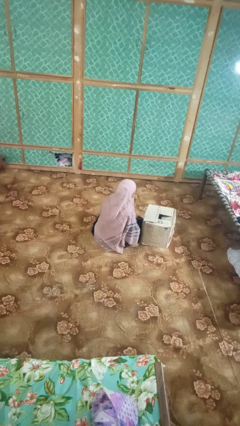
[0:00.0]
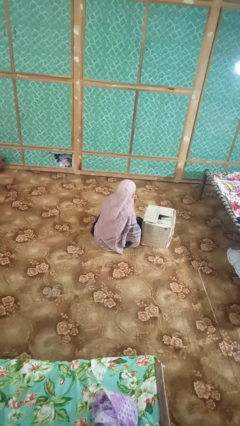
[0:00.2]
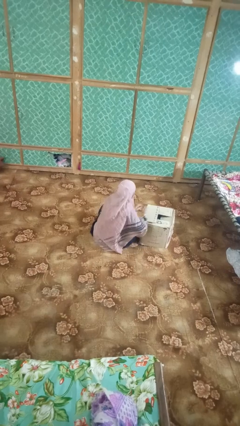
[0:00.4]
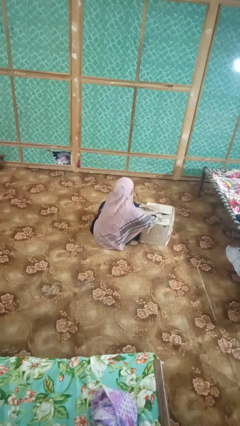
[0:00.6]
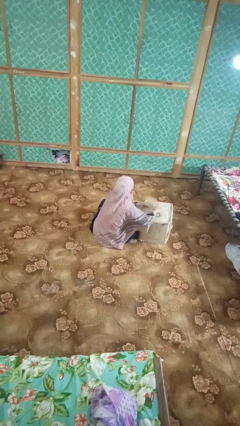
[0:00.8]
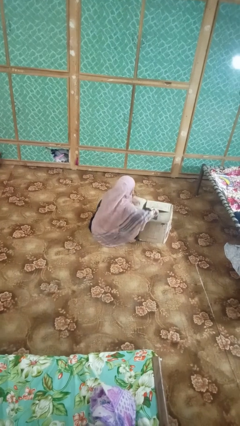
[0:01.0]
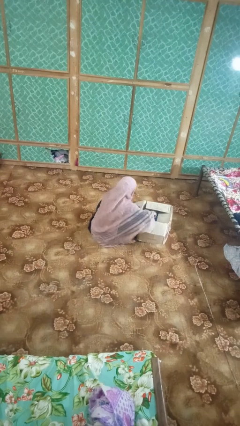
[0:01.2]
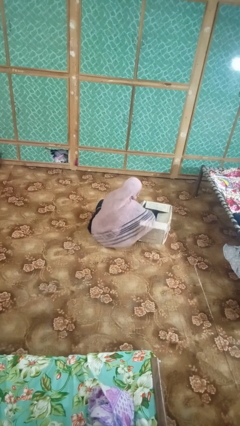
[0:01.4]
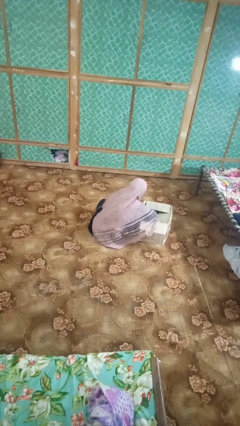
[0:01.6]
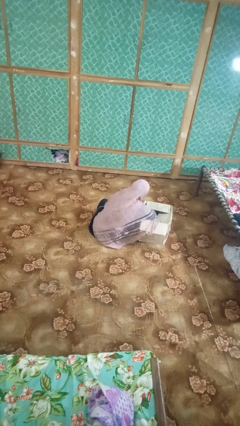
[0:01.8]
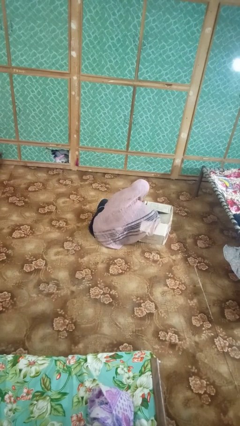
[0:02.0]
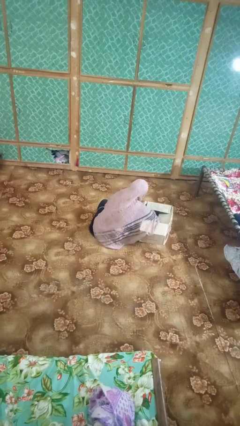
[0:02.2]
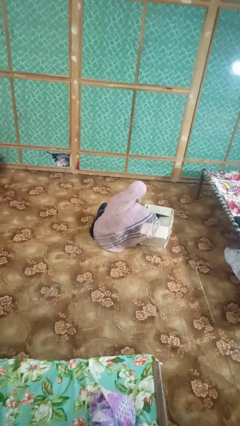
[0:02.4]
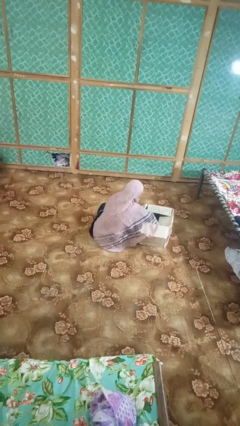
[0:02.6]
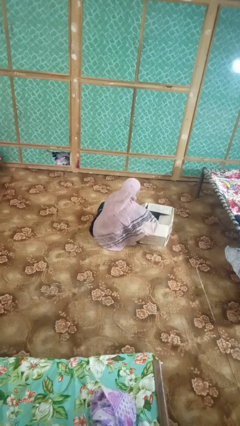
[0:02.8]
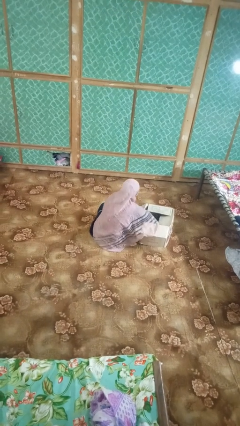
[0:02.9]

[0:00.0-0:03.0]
person searches in box

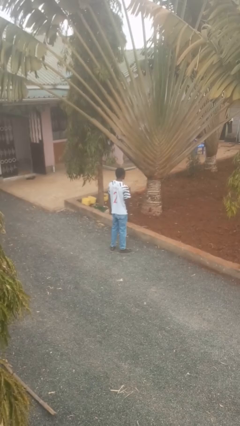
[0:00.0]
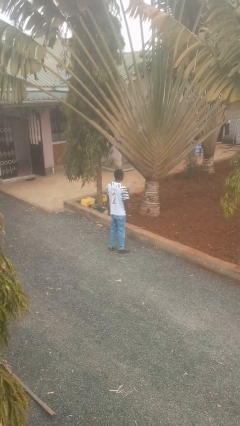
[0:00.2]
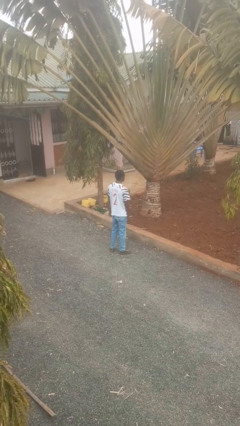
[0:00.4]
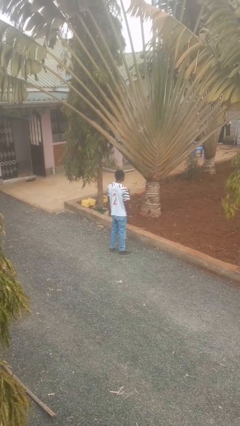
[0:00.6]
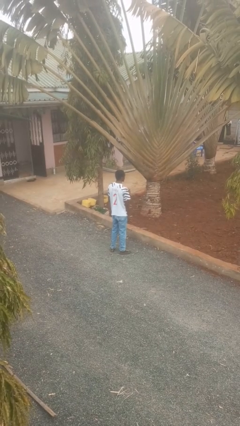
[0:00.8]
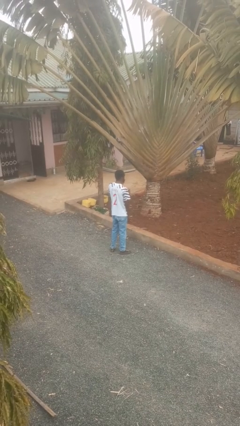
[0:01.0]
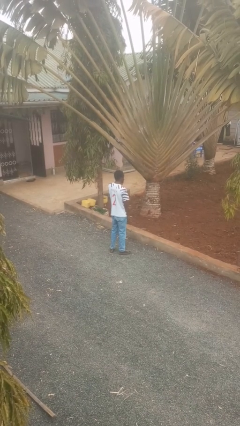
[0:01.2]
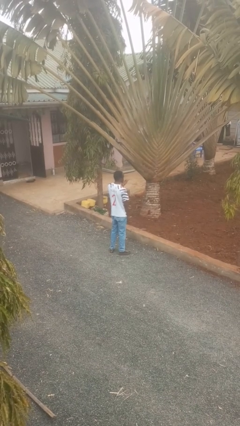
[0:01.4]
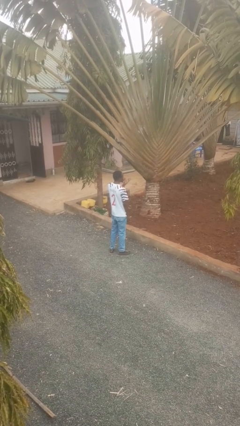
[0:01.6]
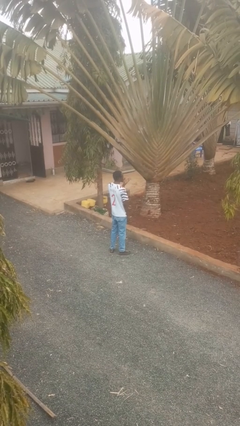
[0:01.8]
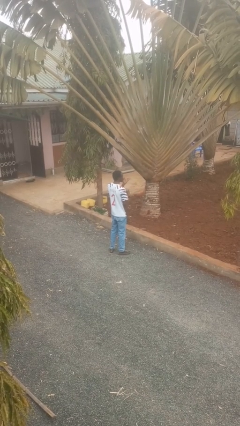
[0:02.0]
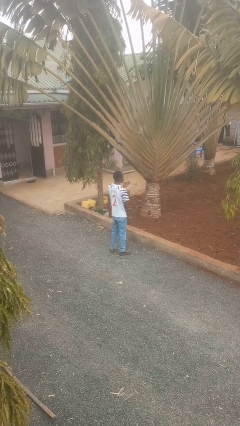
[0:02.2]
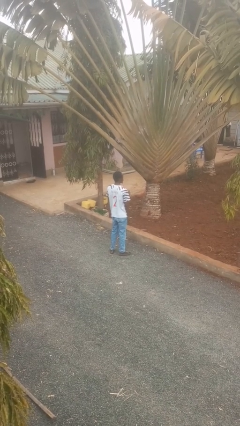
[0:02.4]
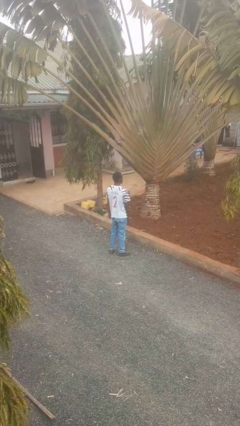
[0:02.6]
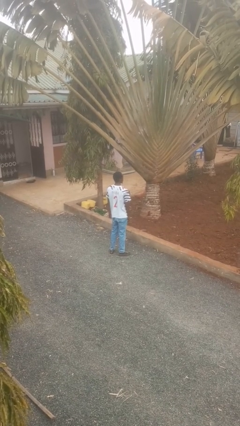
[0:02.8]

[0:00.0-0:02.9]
person gestures blow kiss

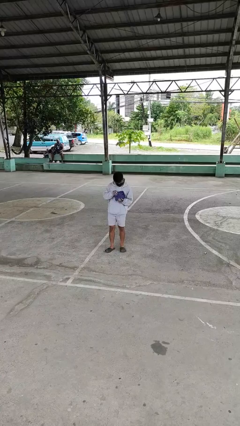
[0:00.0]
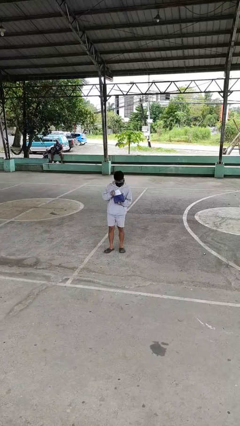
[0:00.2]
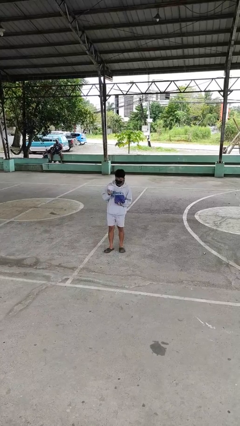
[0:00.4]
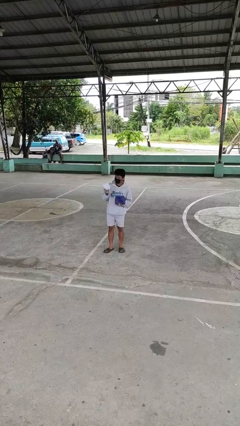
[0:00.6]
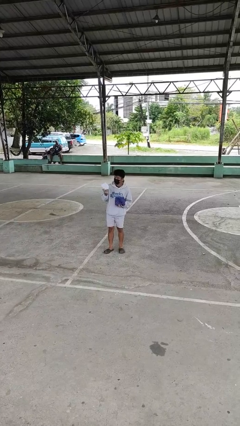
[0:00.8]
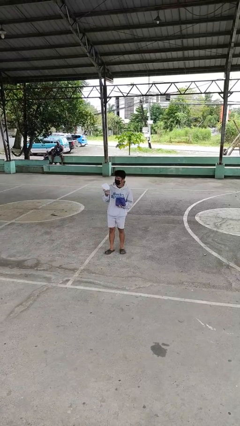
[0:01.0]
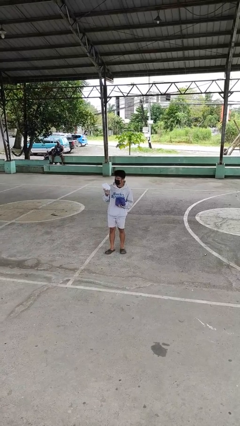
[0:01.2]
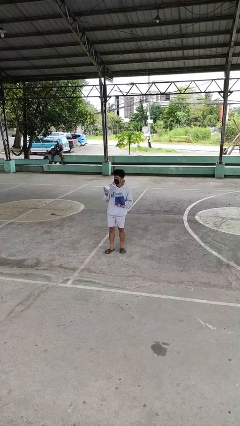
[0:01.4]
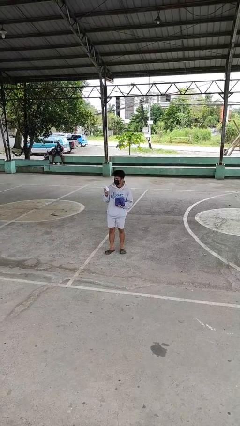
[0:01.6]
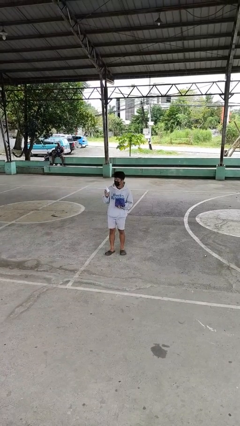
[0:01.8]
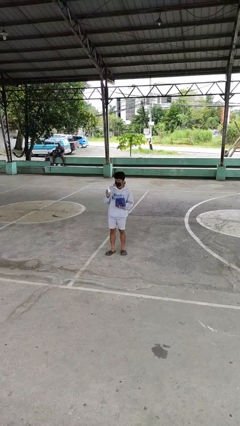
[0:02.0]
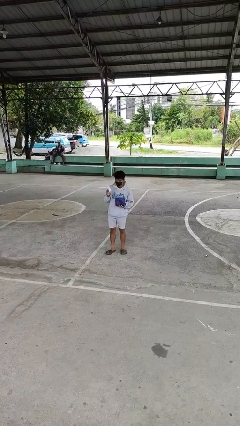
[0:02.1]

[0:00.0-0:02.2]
person takes object from purse

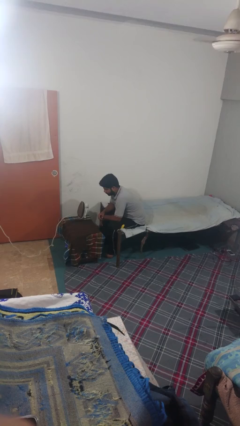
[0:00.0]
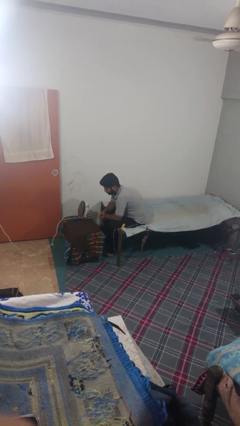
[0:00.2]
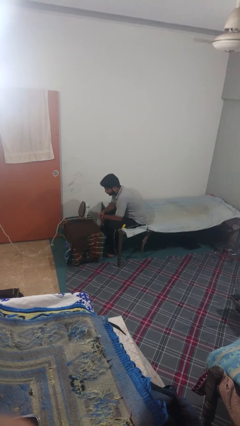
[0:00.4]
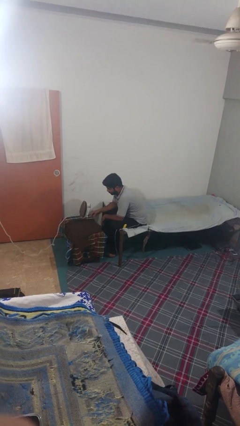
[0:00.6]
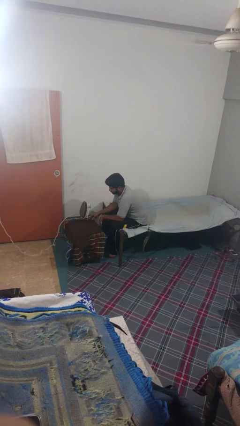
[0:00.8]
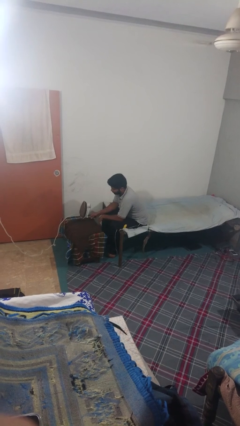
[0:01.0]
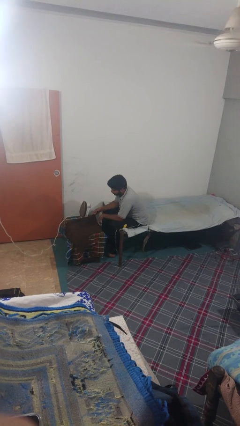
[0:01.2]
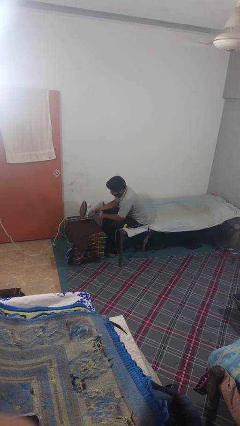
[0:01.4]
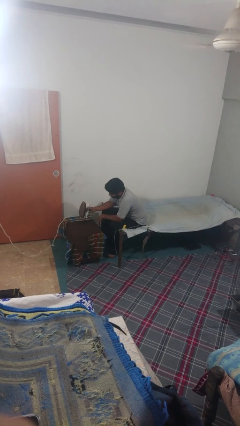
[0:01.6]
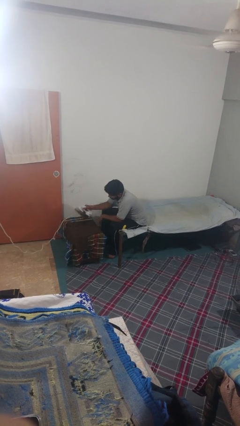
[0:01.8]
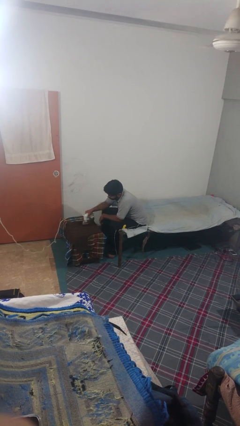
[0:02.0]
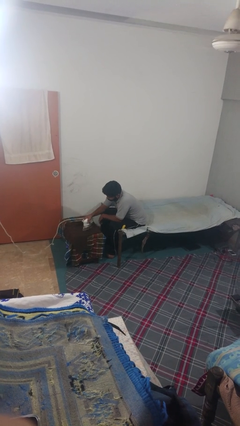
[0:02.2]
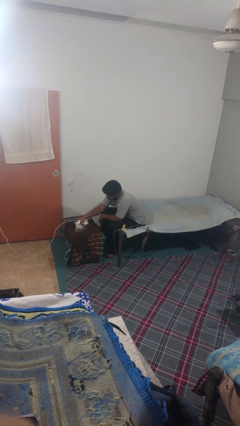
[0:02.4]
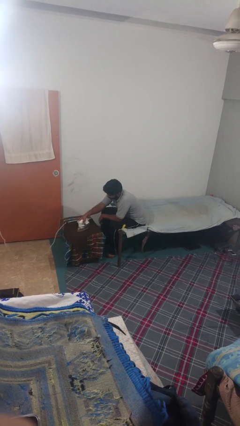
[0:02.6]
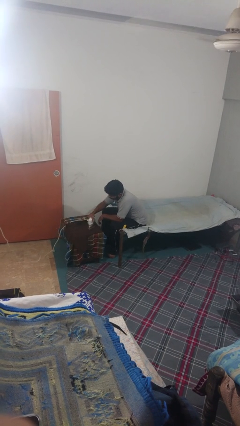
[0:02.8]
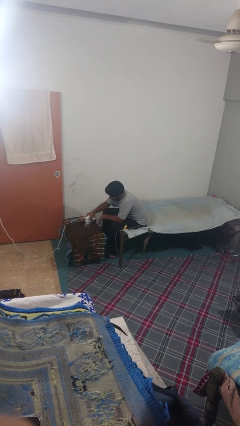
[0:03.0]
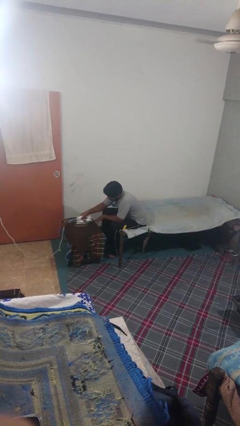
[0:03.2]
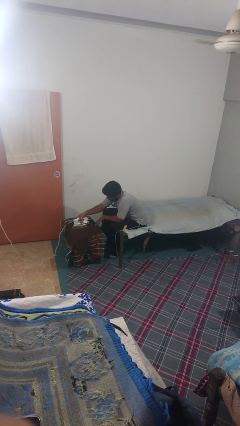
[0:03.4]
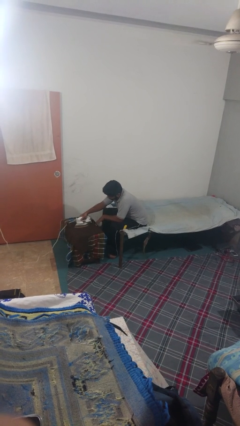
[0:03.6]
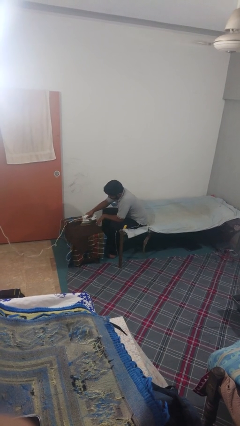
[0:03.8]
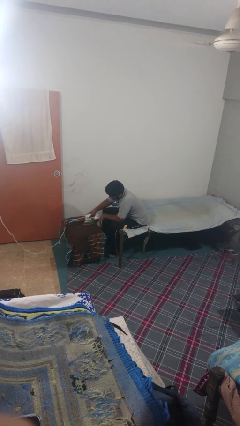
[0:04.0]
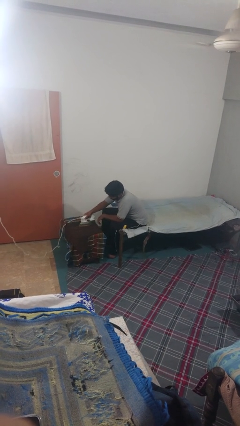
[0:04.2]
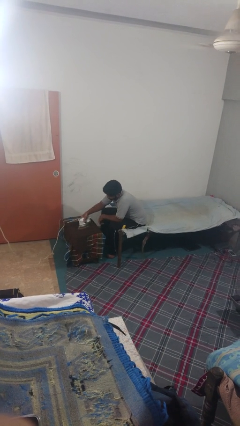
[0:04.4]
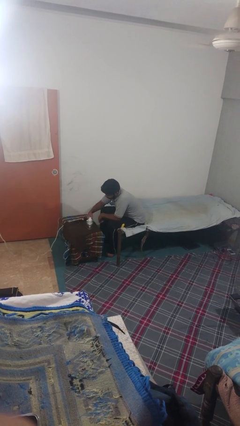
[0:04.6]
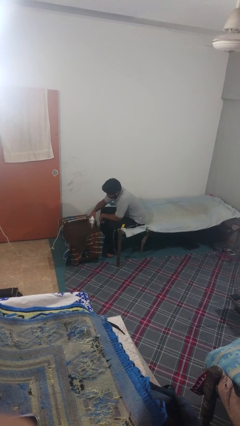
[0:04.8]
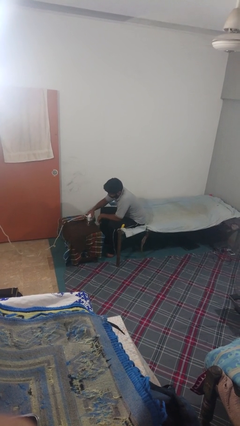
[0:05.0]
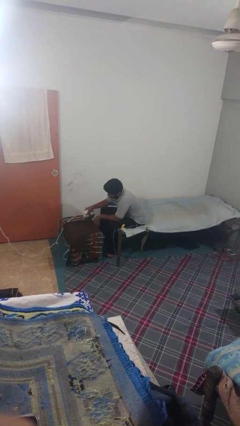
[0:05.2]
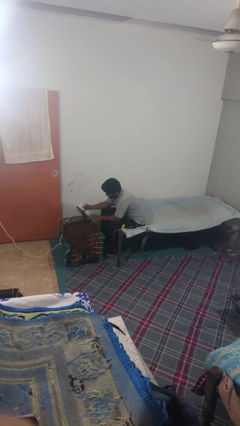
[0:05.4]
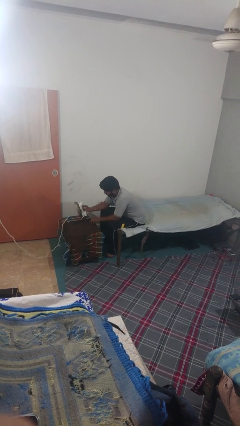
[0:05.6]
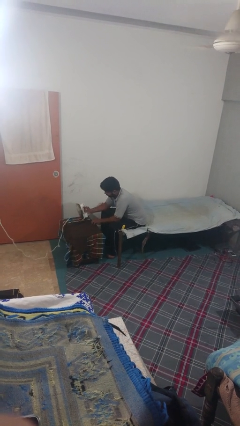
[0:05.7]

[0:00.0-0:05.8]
person irons clothes

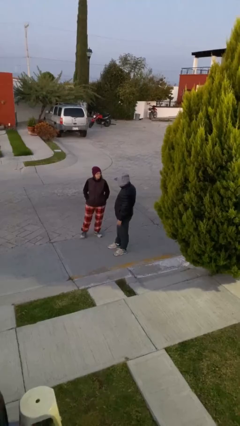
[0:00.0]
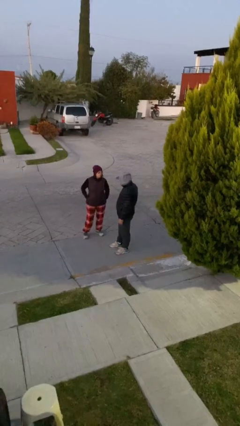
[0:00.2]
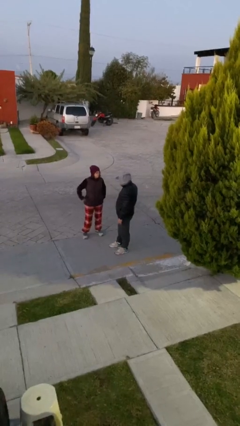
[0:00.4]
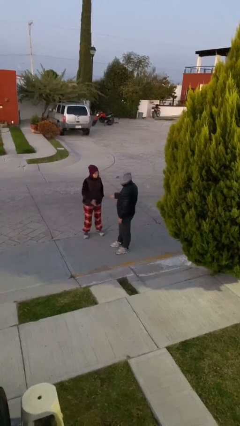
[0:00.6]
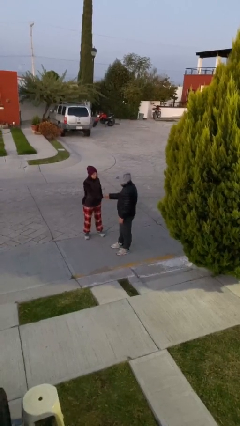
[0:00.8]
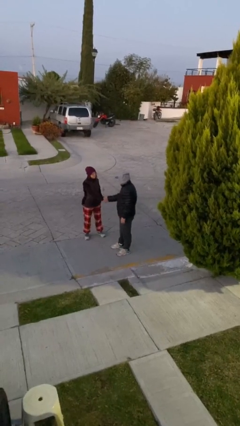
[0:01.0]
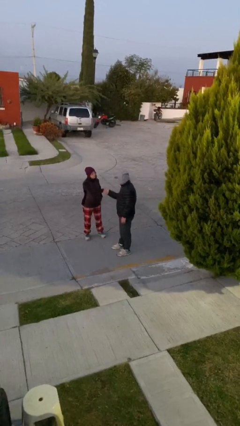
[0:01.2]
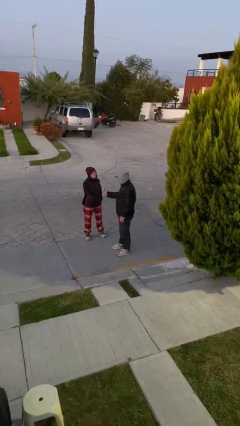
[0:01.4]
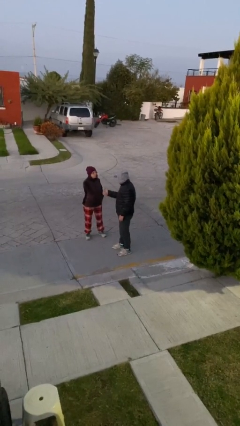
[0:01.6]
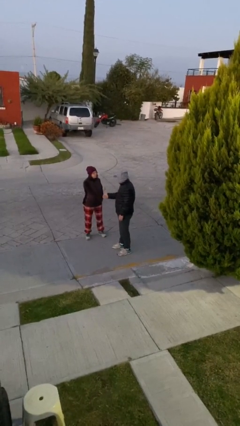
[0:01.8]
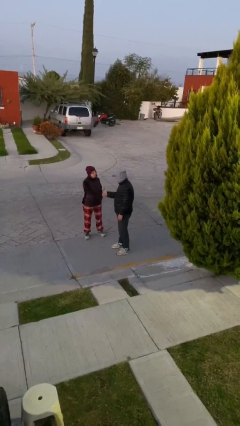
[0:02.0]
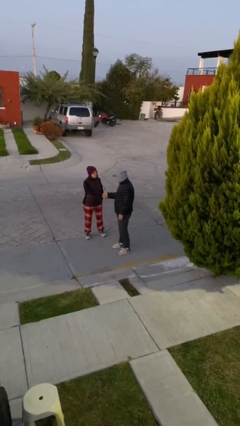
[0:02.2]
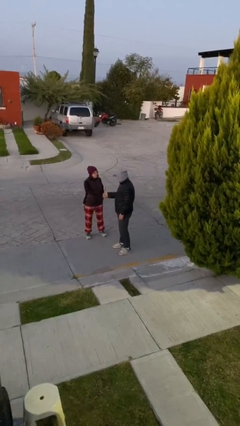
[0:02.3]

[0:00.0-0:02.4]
person shakes hand

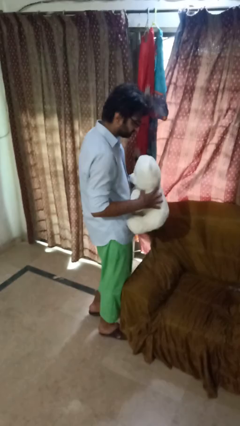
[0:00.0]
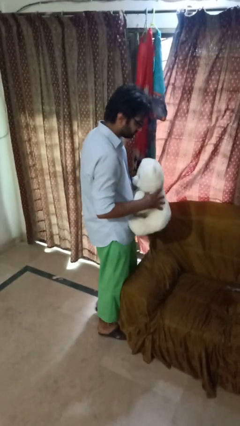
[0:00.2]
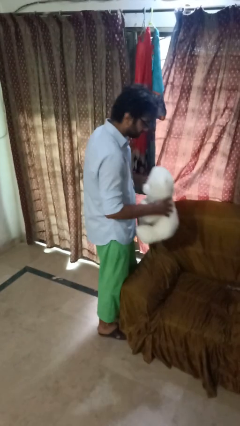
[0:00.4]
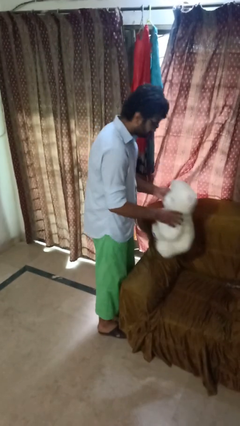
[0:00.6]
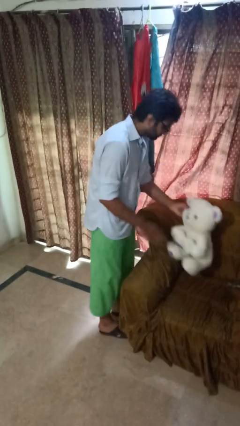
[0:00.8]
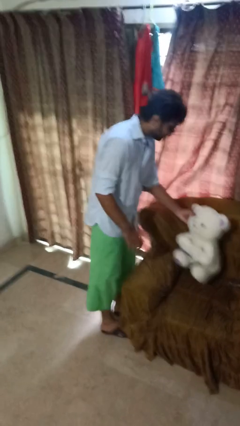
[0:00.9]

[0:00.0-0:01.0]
person puts down object on couch

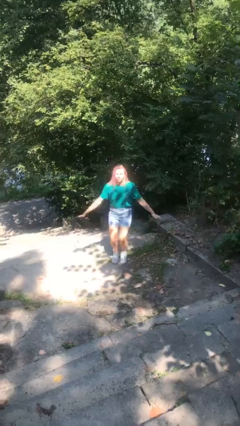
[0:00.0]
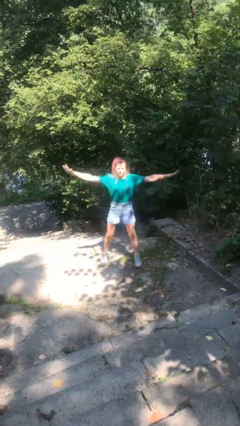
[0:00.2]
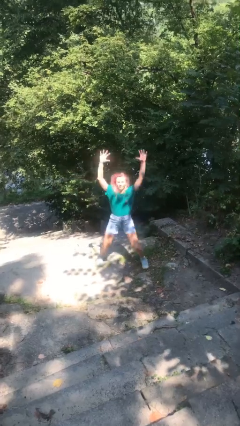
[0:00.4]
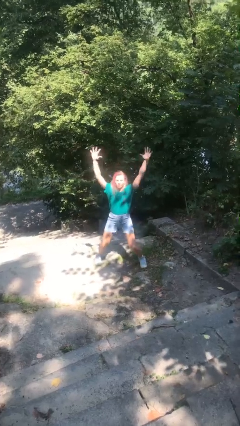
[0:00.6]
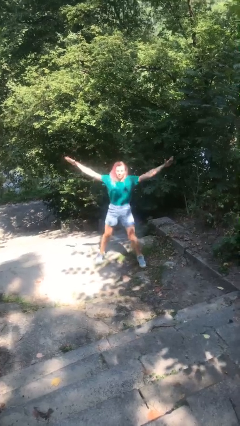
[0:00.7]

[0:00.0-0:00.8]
person exercises with jumping jacks
